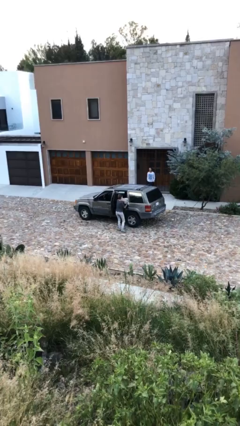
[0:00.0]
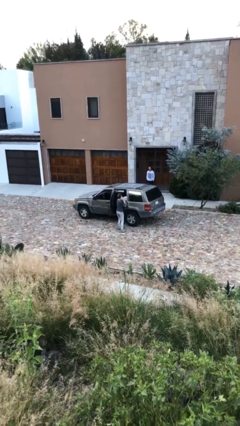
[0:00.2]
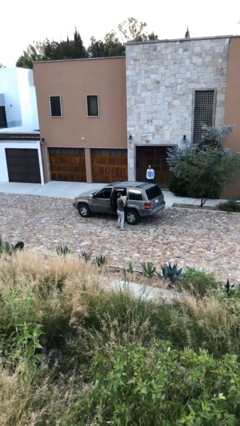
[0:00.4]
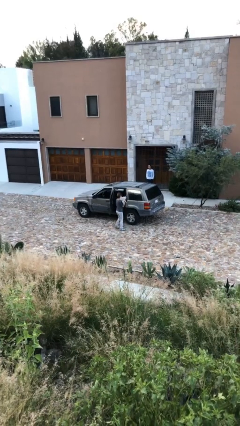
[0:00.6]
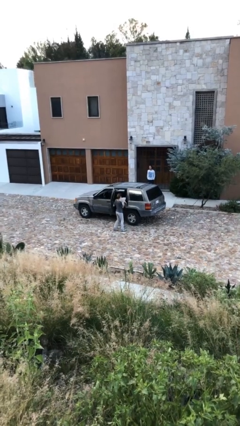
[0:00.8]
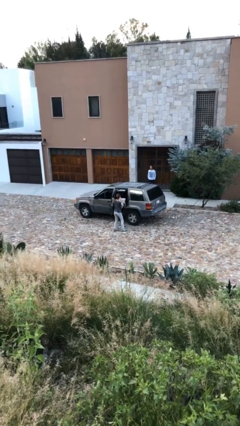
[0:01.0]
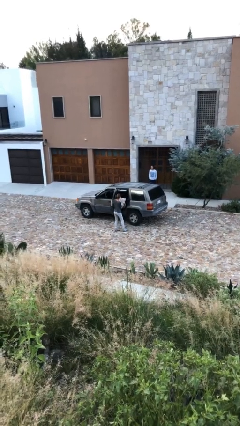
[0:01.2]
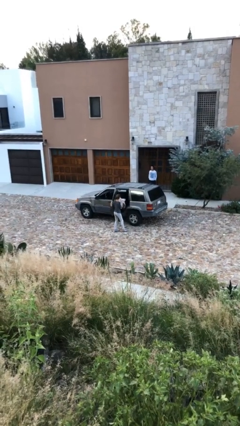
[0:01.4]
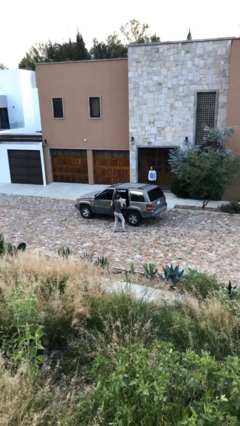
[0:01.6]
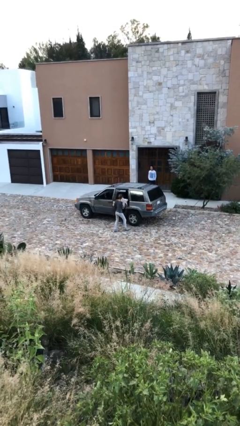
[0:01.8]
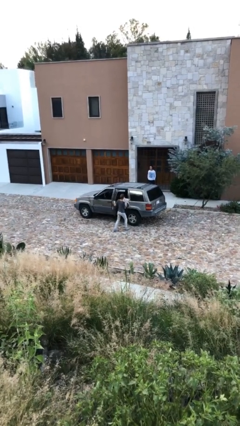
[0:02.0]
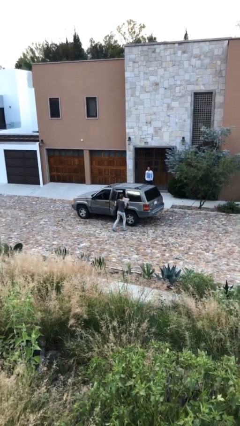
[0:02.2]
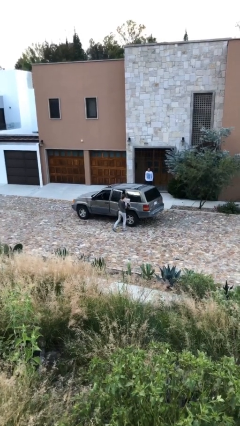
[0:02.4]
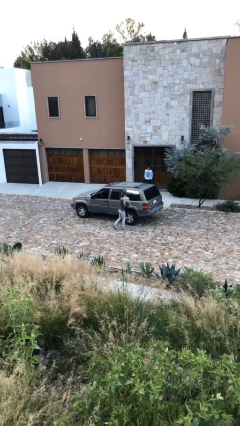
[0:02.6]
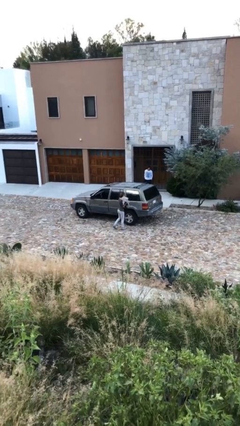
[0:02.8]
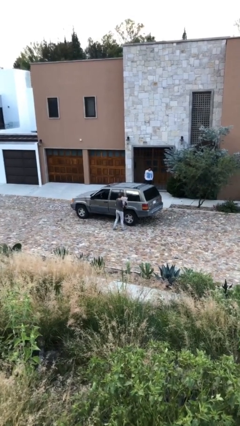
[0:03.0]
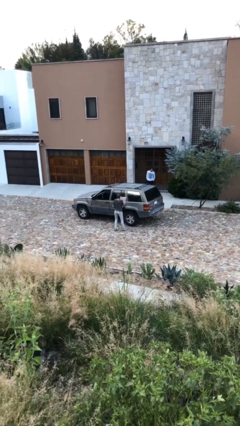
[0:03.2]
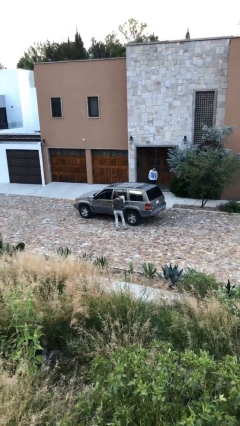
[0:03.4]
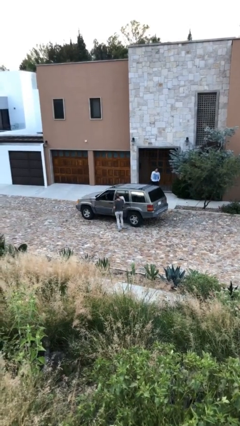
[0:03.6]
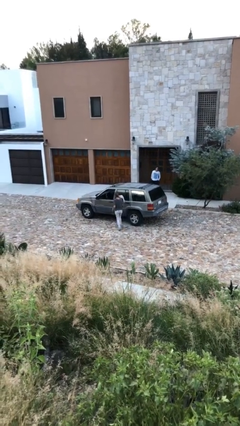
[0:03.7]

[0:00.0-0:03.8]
person closes car door

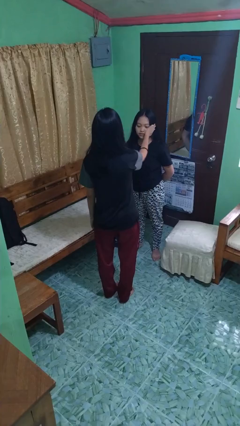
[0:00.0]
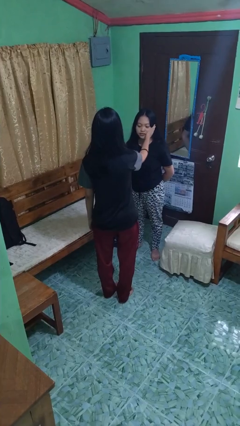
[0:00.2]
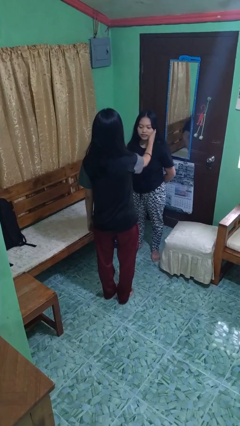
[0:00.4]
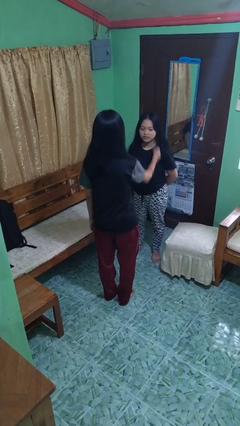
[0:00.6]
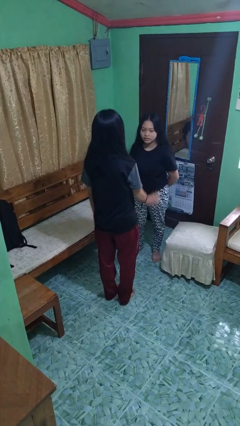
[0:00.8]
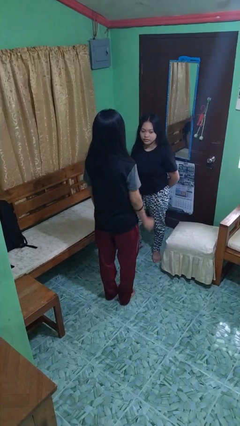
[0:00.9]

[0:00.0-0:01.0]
person touches face of person

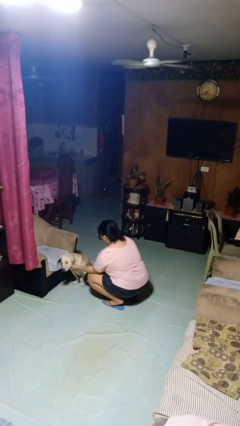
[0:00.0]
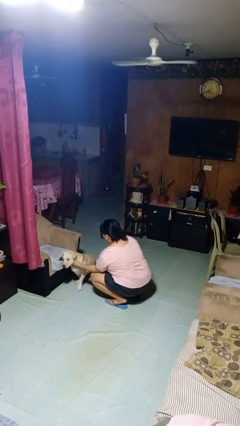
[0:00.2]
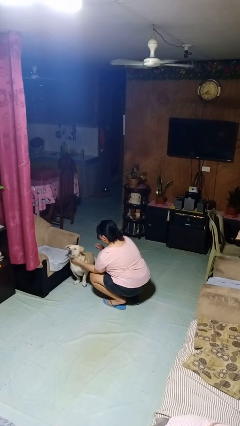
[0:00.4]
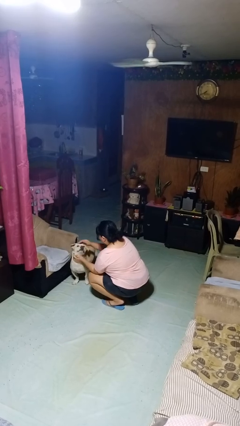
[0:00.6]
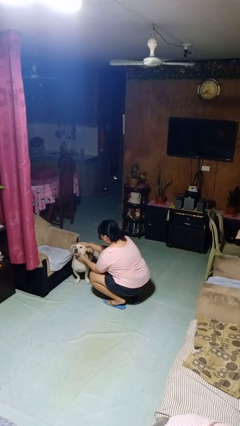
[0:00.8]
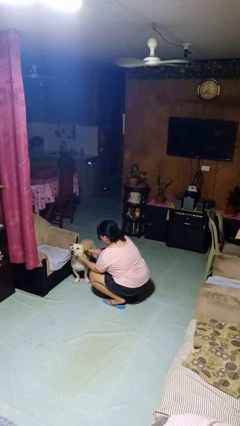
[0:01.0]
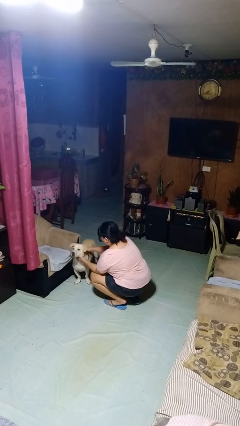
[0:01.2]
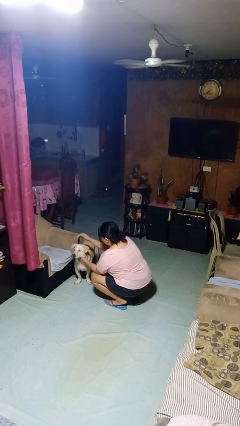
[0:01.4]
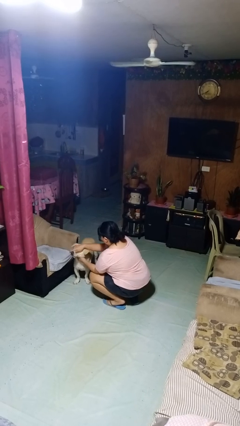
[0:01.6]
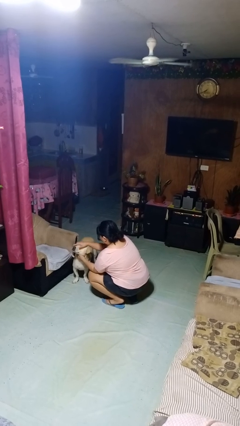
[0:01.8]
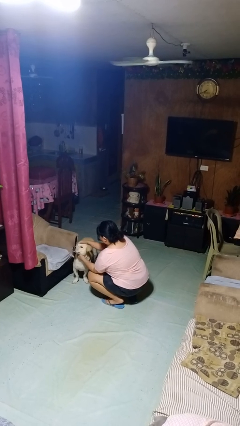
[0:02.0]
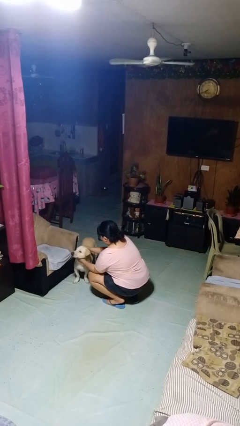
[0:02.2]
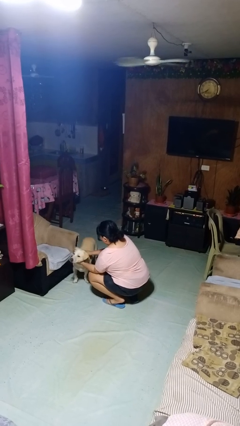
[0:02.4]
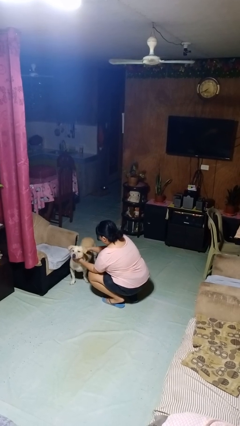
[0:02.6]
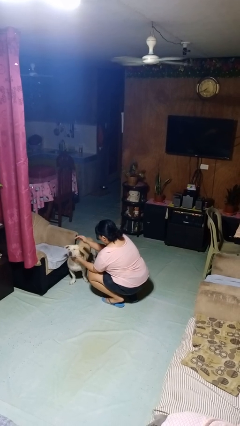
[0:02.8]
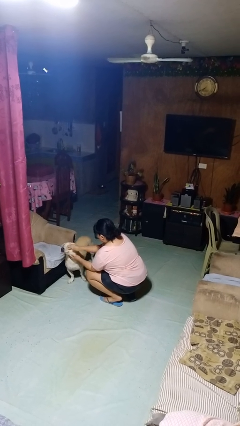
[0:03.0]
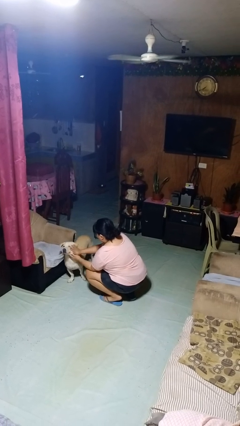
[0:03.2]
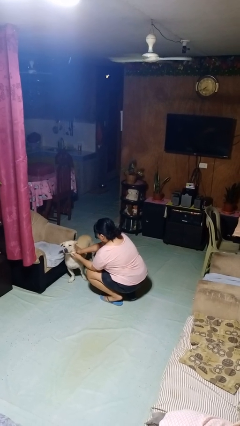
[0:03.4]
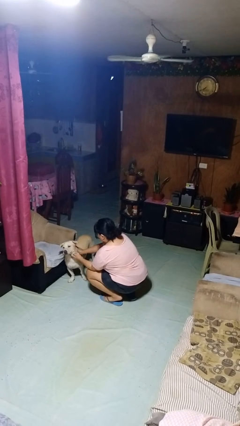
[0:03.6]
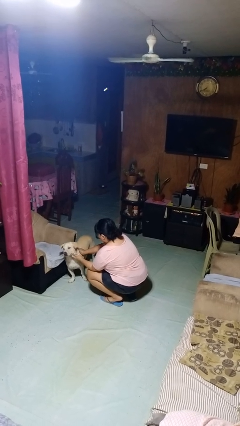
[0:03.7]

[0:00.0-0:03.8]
person pets dog

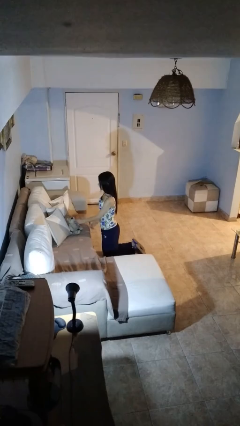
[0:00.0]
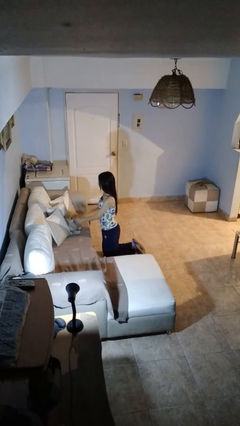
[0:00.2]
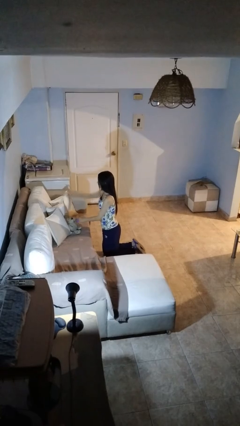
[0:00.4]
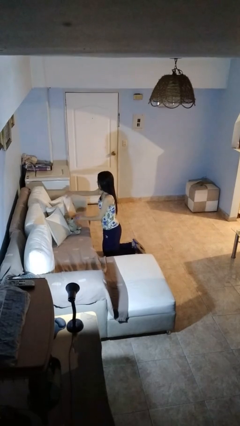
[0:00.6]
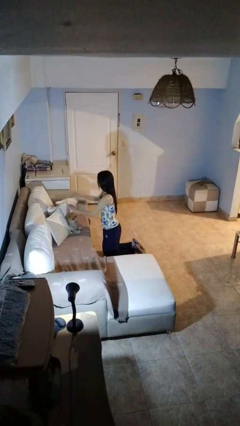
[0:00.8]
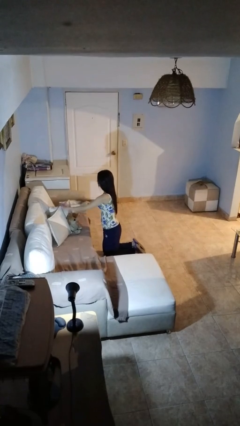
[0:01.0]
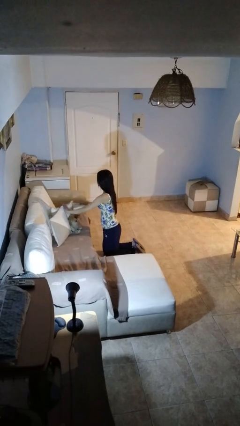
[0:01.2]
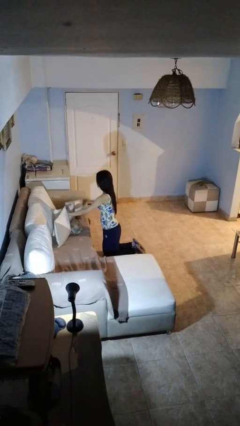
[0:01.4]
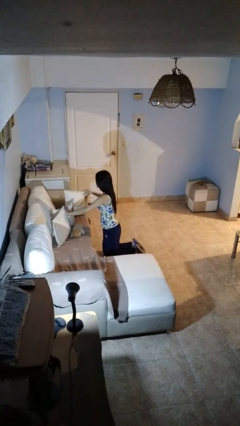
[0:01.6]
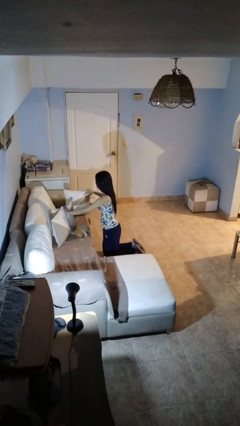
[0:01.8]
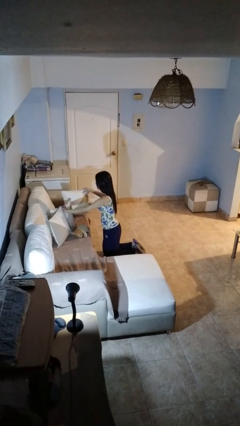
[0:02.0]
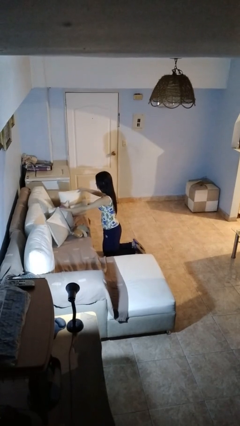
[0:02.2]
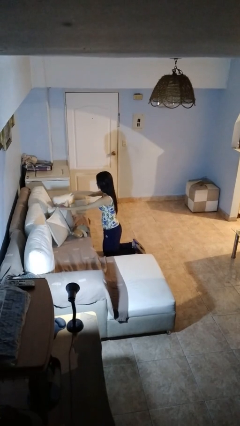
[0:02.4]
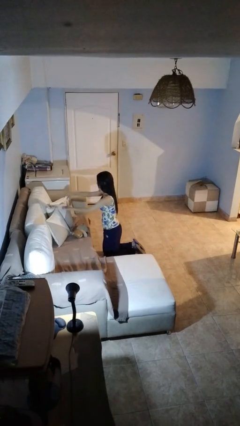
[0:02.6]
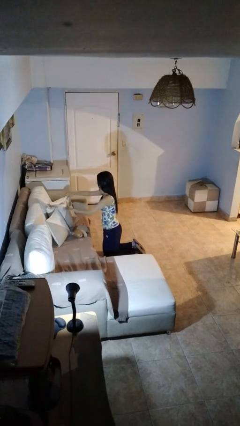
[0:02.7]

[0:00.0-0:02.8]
person searches in couch

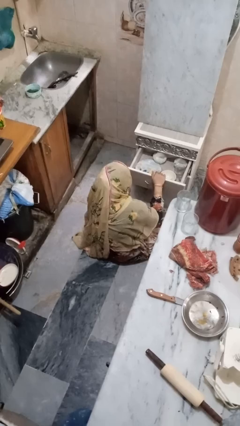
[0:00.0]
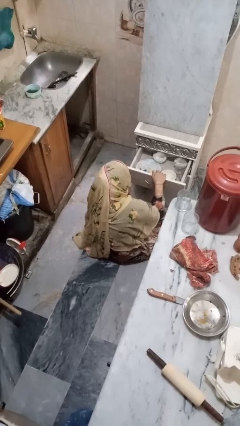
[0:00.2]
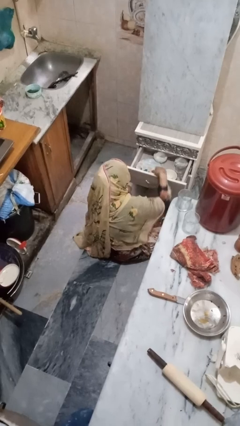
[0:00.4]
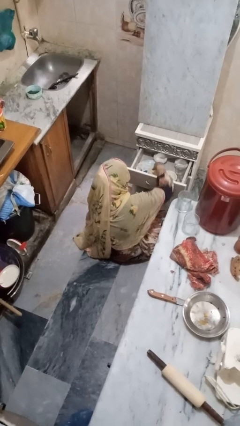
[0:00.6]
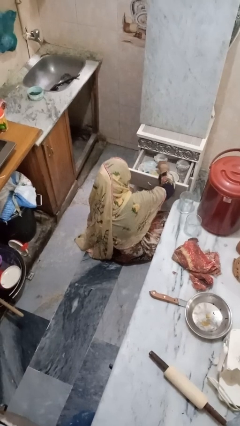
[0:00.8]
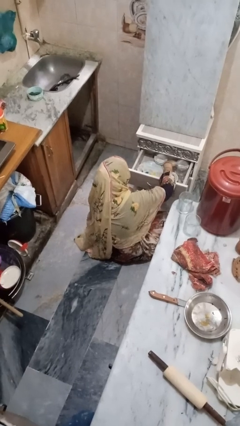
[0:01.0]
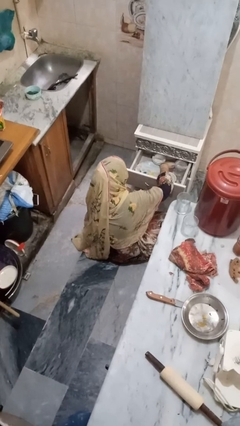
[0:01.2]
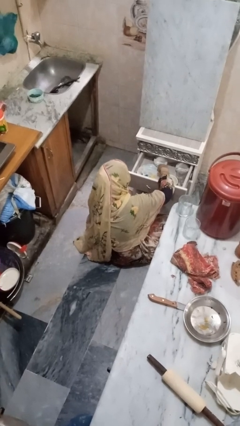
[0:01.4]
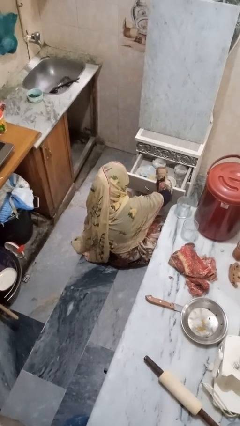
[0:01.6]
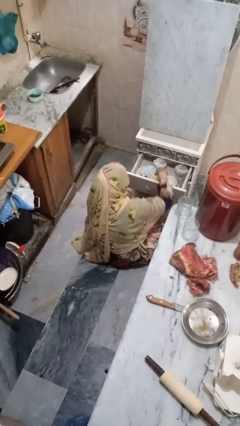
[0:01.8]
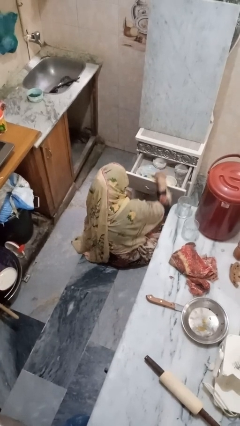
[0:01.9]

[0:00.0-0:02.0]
person searches in kitchen drawer

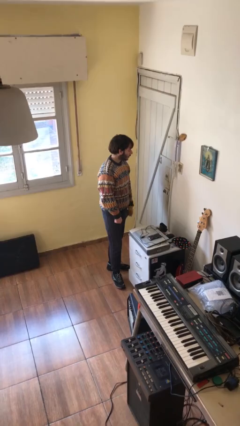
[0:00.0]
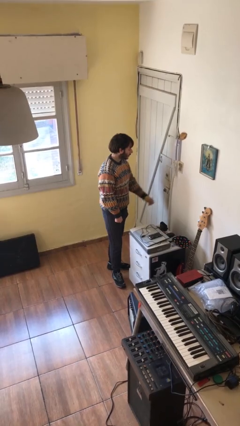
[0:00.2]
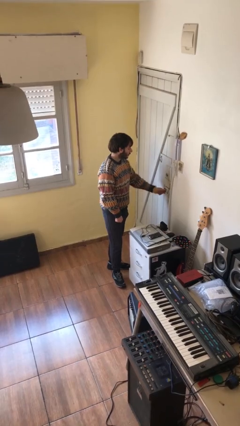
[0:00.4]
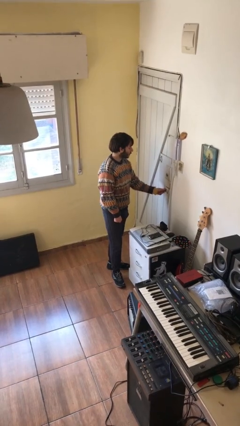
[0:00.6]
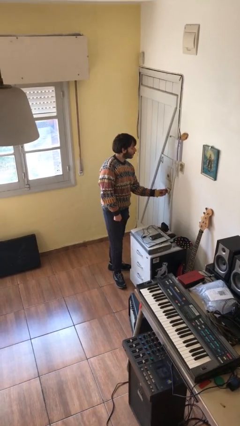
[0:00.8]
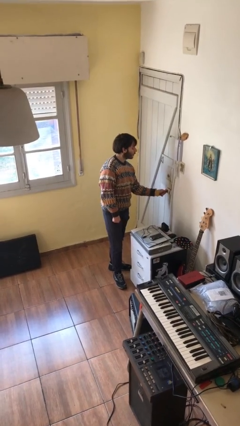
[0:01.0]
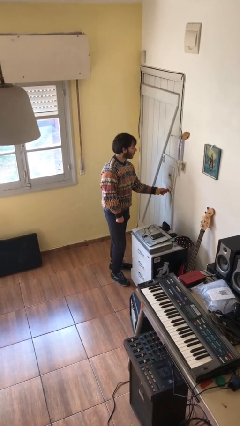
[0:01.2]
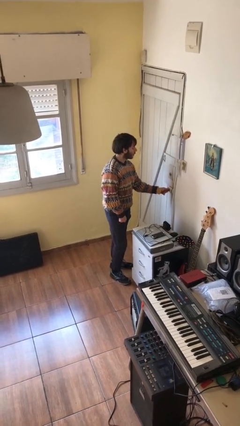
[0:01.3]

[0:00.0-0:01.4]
person unlocks door with keys

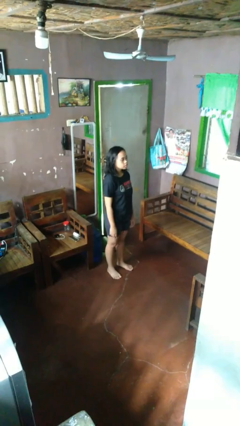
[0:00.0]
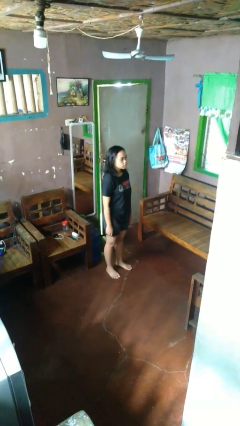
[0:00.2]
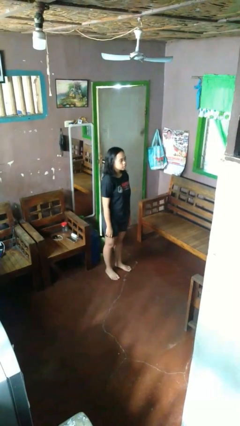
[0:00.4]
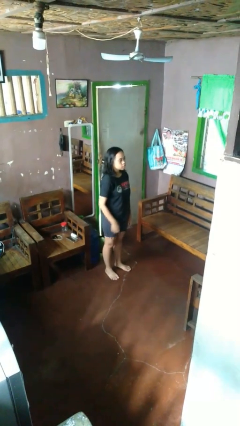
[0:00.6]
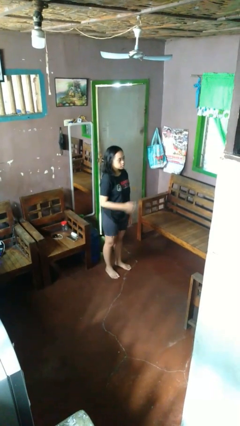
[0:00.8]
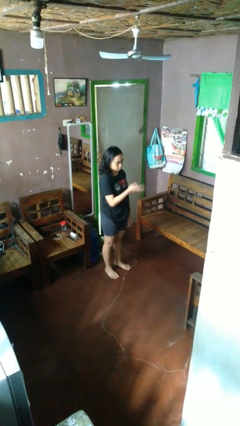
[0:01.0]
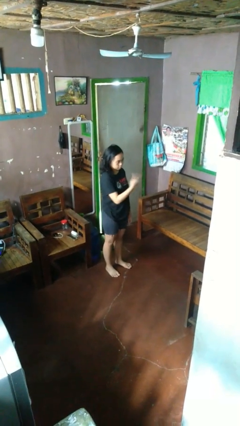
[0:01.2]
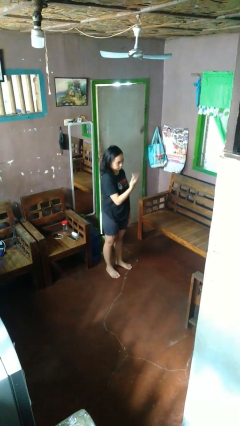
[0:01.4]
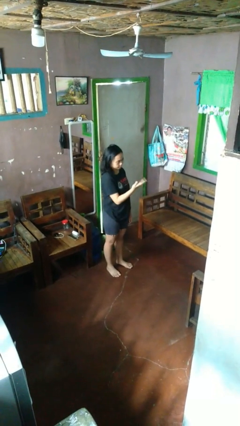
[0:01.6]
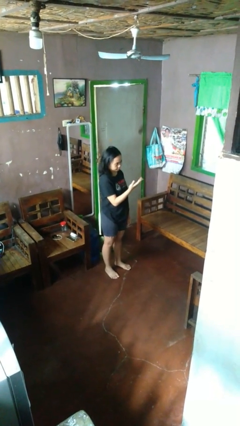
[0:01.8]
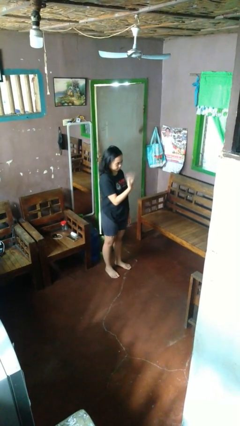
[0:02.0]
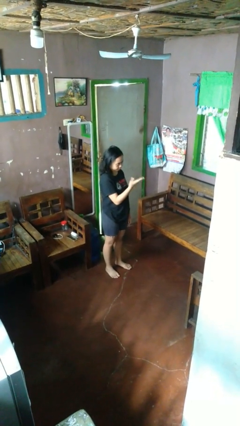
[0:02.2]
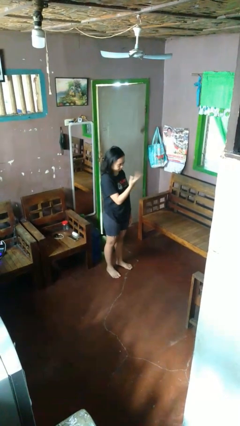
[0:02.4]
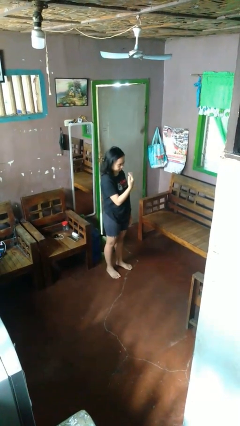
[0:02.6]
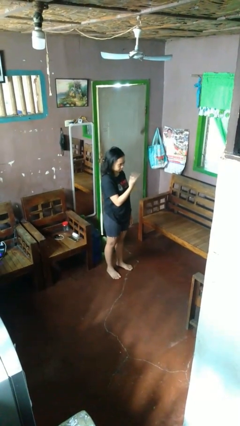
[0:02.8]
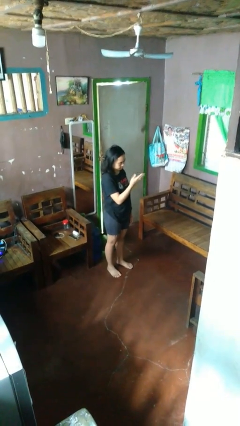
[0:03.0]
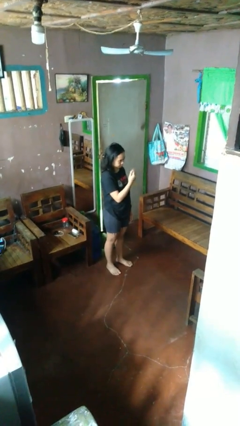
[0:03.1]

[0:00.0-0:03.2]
person gestures come here
